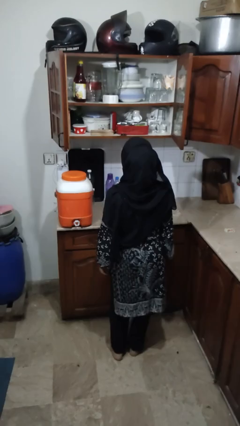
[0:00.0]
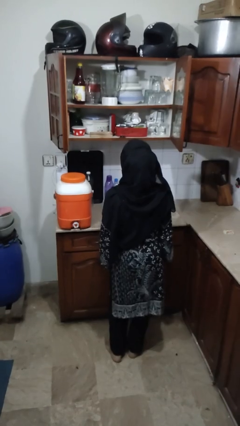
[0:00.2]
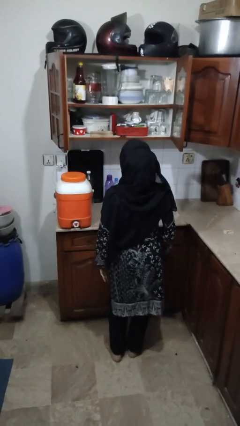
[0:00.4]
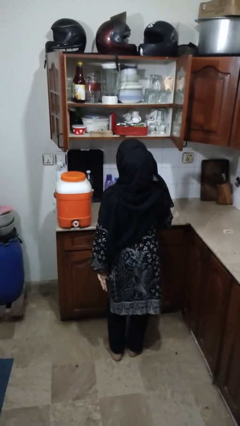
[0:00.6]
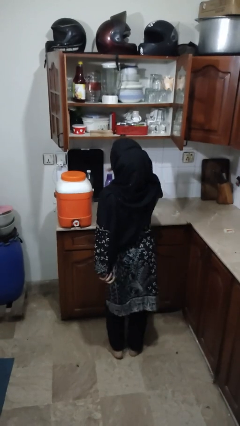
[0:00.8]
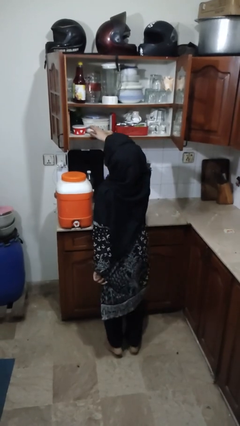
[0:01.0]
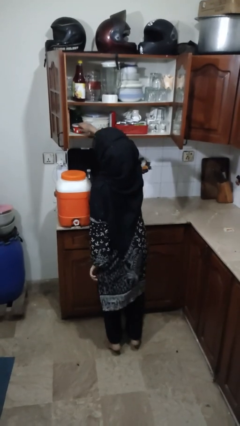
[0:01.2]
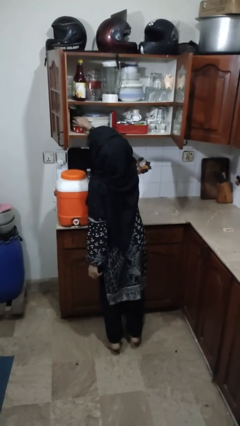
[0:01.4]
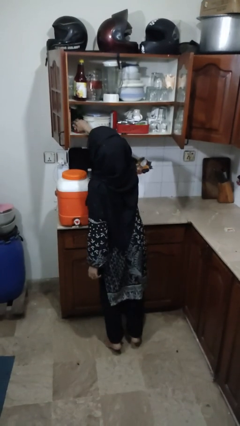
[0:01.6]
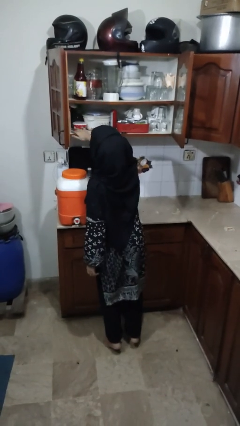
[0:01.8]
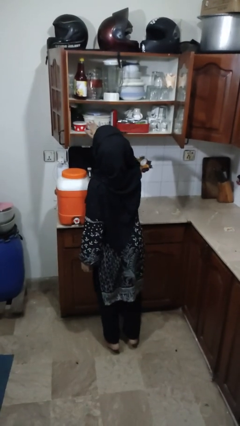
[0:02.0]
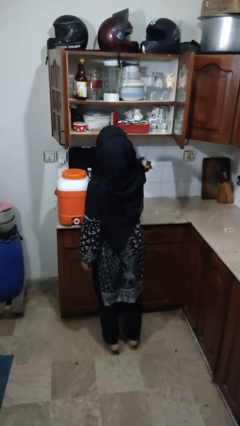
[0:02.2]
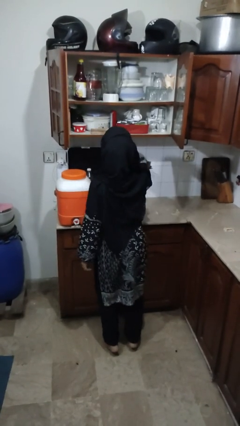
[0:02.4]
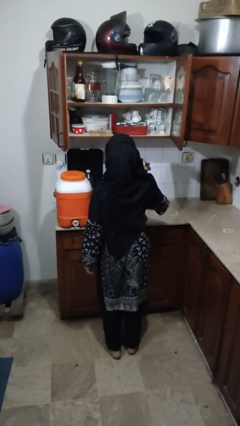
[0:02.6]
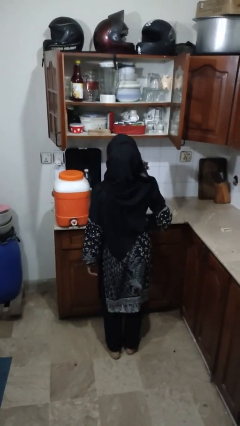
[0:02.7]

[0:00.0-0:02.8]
person searches in cabinet

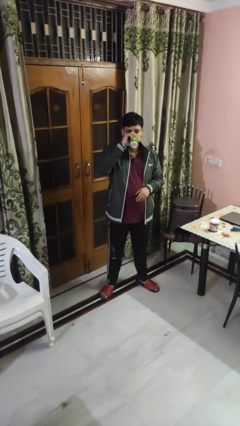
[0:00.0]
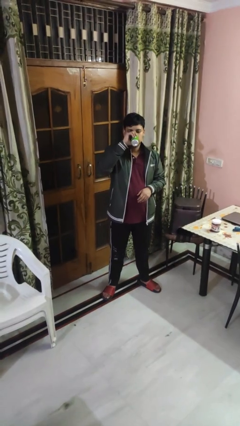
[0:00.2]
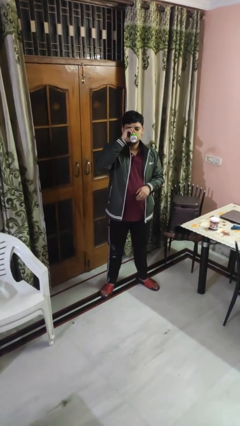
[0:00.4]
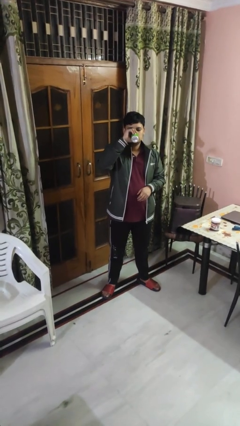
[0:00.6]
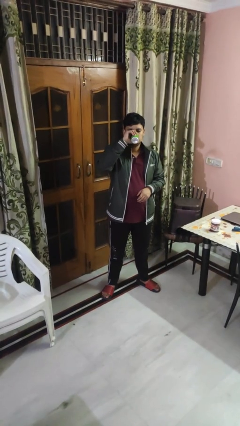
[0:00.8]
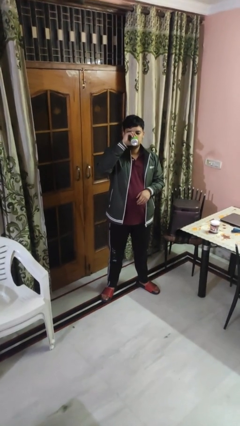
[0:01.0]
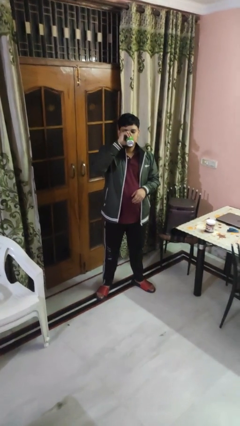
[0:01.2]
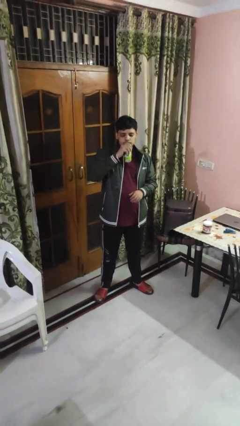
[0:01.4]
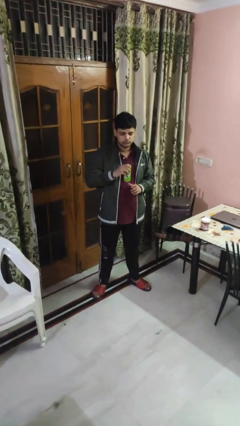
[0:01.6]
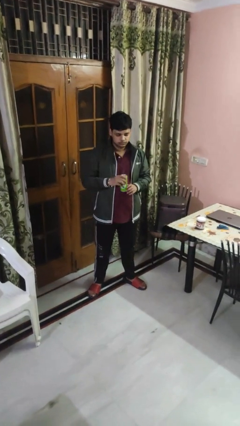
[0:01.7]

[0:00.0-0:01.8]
person drinks from beverage can

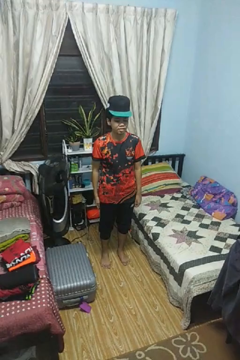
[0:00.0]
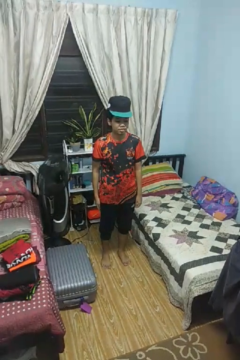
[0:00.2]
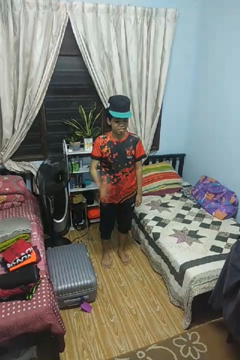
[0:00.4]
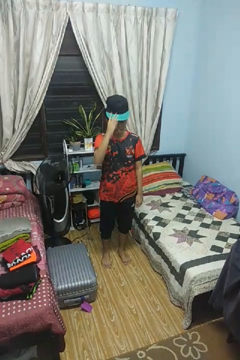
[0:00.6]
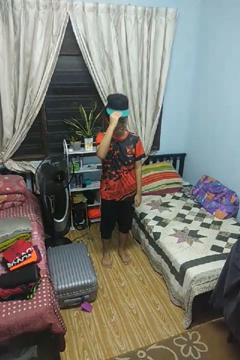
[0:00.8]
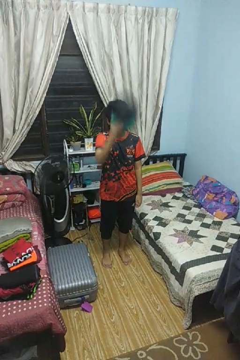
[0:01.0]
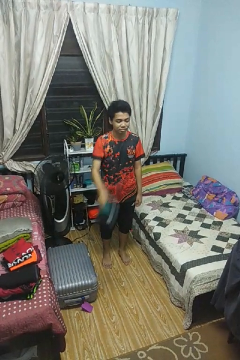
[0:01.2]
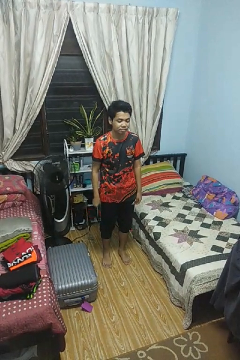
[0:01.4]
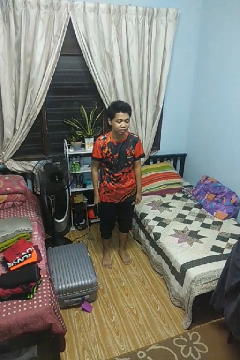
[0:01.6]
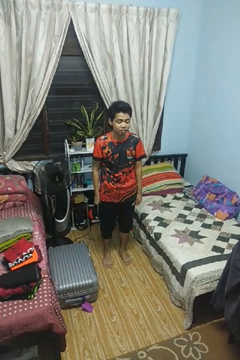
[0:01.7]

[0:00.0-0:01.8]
person takes off hat

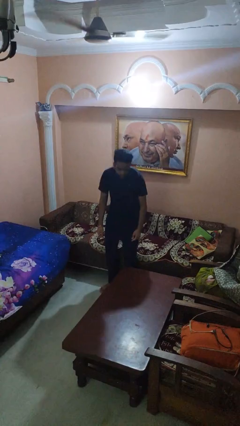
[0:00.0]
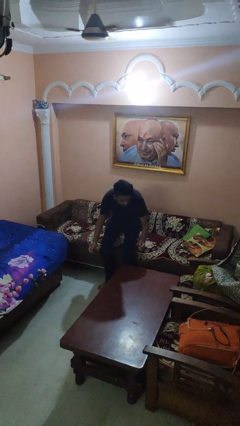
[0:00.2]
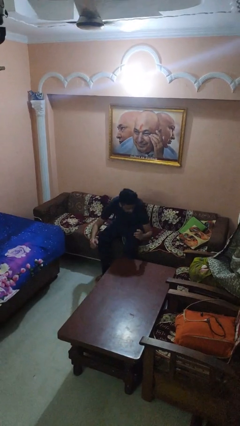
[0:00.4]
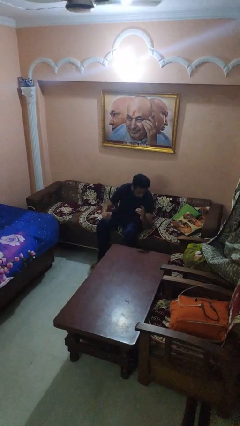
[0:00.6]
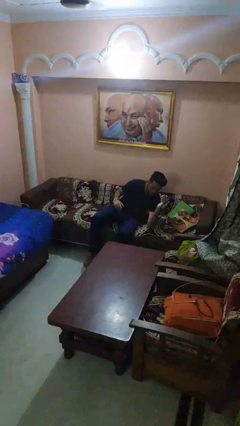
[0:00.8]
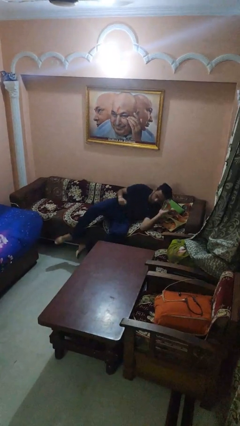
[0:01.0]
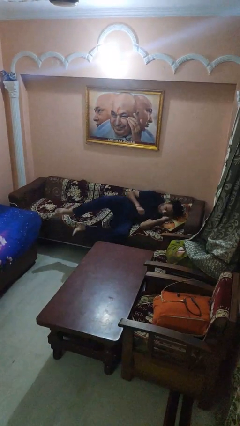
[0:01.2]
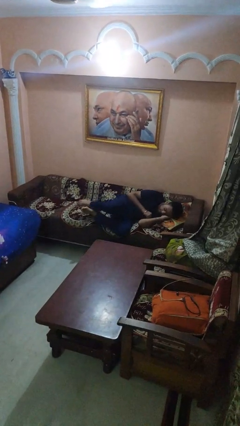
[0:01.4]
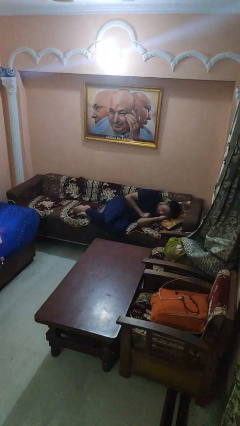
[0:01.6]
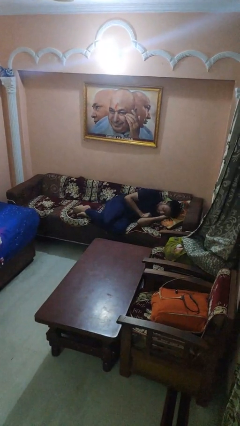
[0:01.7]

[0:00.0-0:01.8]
person lies down on couch

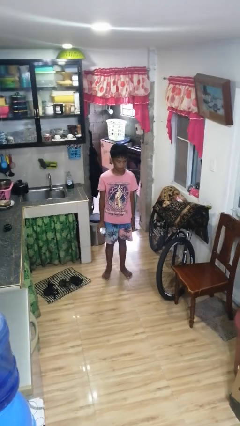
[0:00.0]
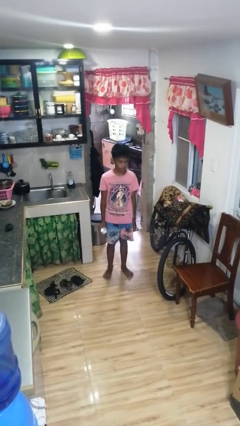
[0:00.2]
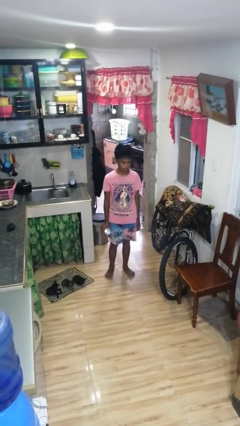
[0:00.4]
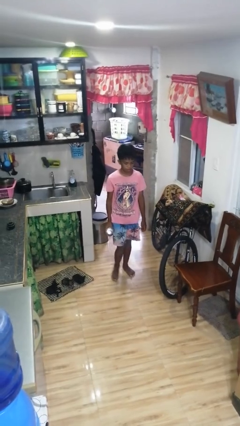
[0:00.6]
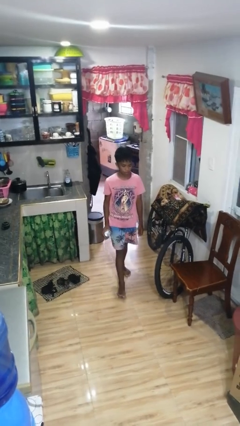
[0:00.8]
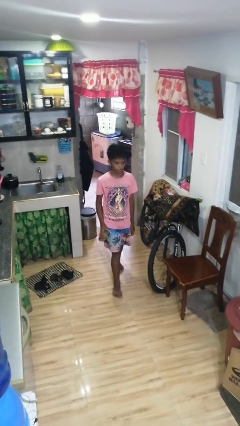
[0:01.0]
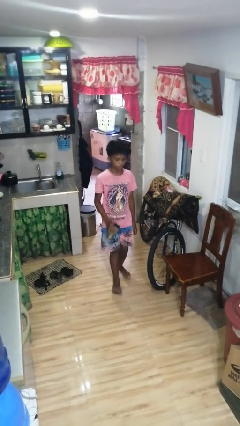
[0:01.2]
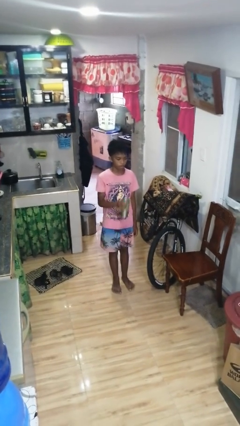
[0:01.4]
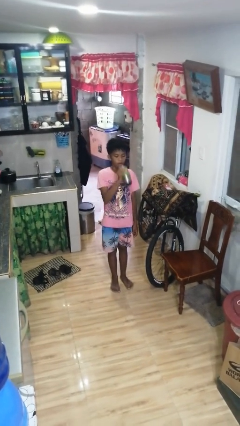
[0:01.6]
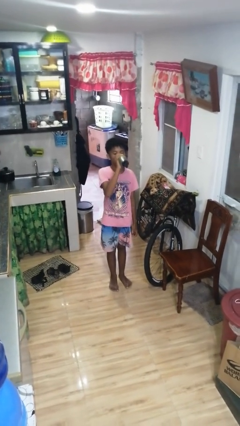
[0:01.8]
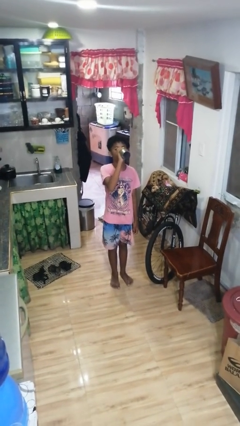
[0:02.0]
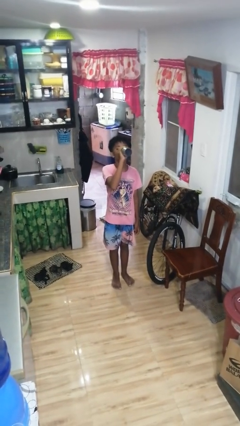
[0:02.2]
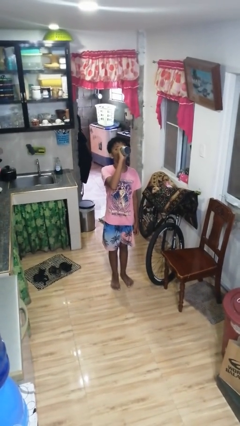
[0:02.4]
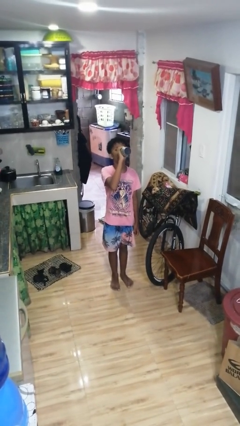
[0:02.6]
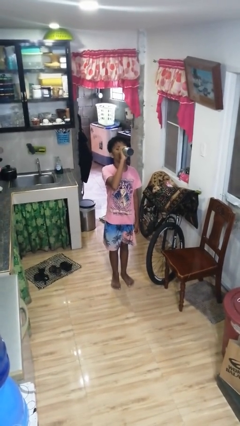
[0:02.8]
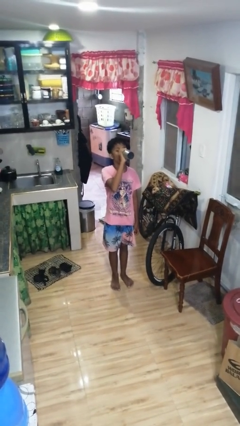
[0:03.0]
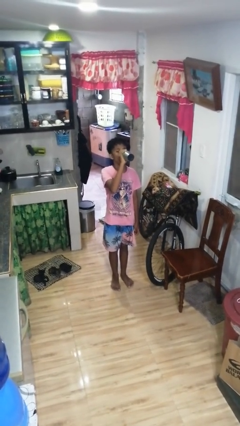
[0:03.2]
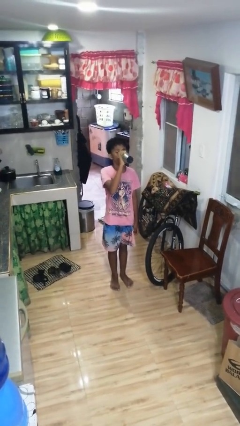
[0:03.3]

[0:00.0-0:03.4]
person drinks from bottle

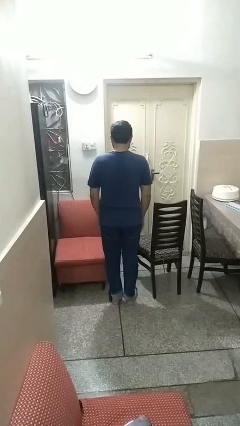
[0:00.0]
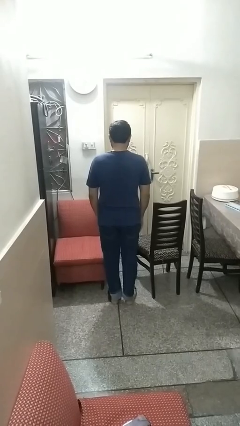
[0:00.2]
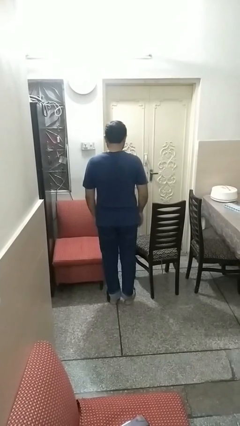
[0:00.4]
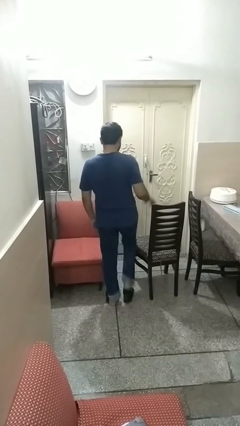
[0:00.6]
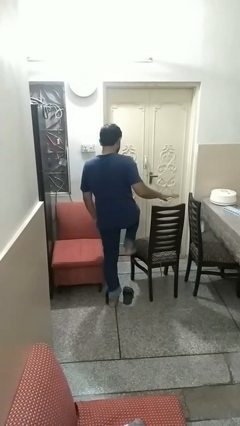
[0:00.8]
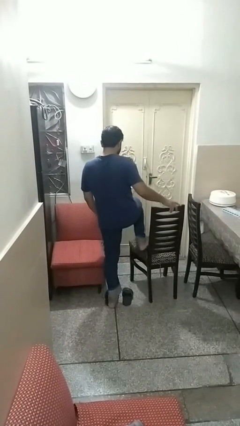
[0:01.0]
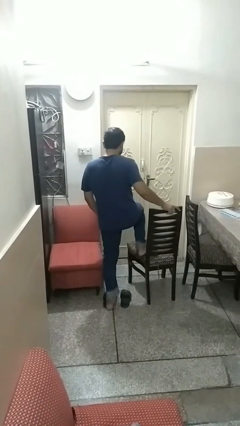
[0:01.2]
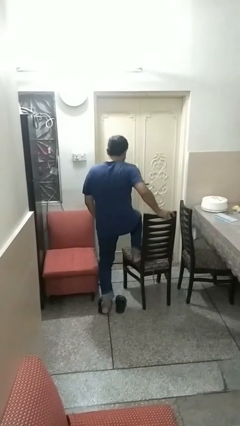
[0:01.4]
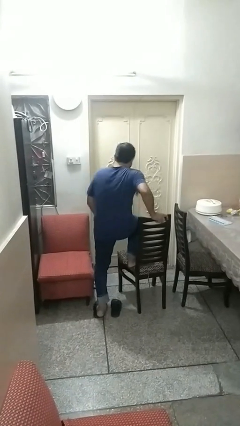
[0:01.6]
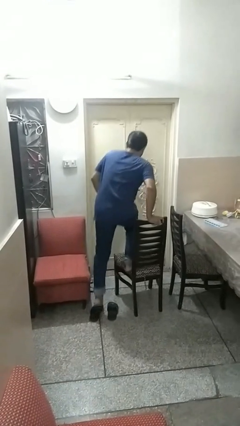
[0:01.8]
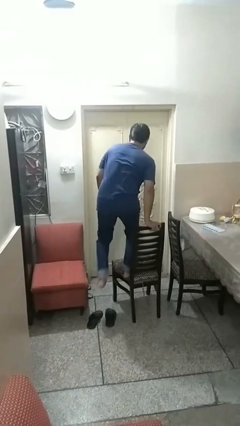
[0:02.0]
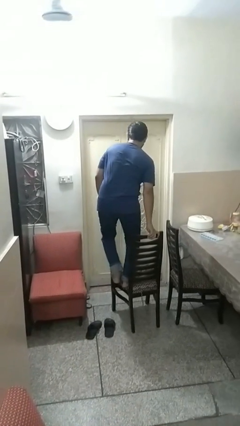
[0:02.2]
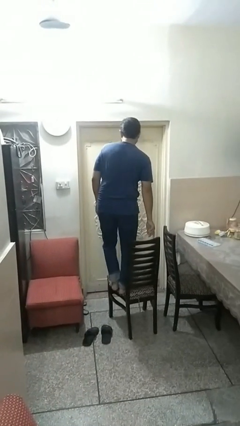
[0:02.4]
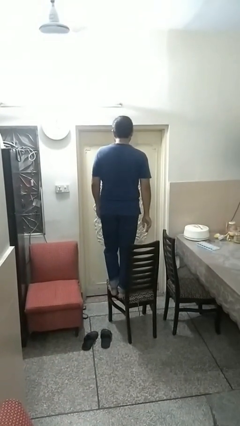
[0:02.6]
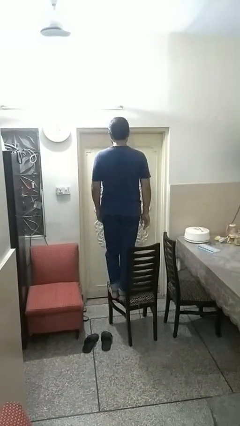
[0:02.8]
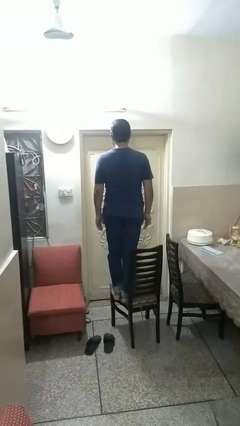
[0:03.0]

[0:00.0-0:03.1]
person climbs on chair

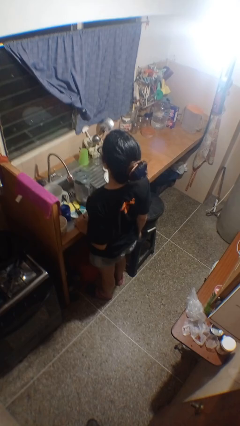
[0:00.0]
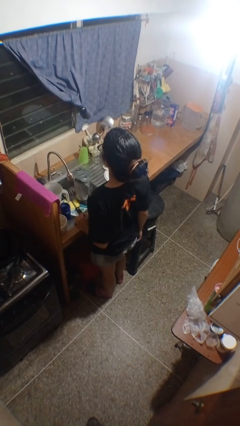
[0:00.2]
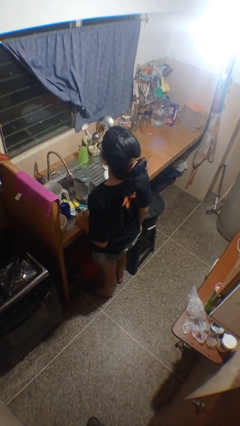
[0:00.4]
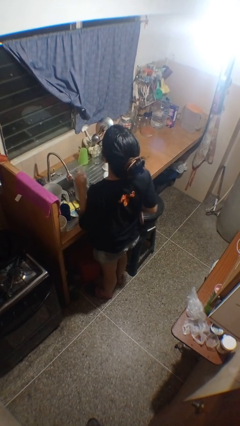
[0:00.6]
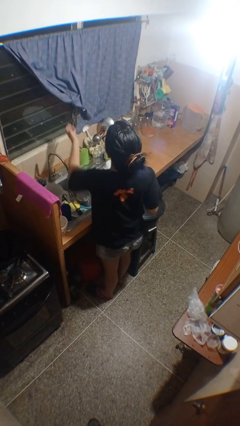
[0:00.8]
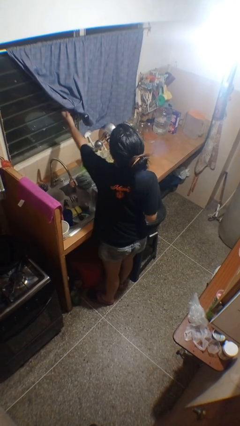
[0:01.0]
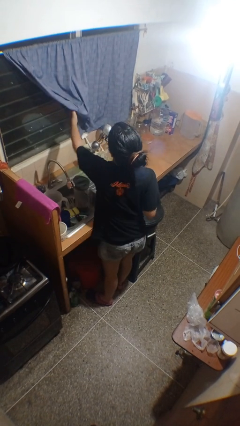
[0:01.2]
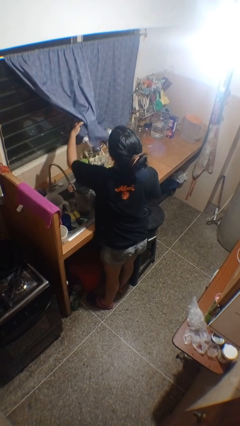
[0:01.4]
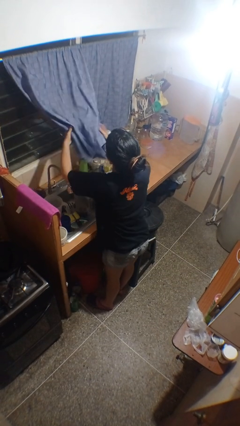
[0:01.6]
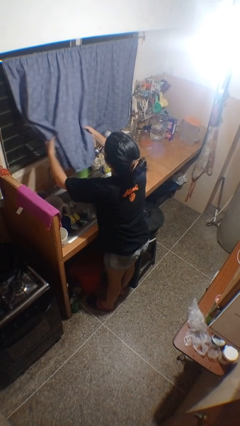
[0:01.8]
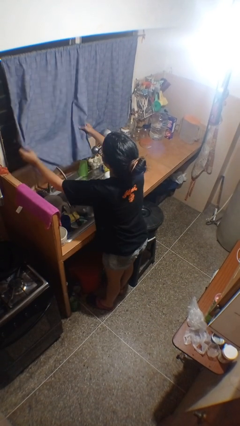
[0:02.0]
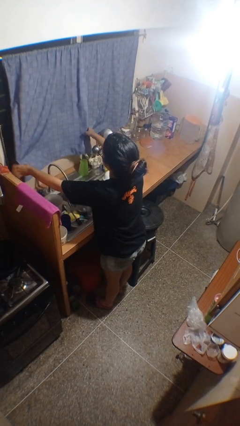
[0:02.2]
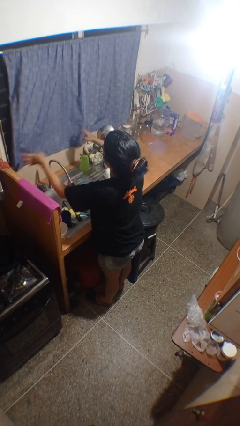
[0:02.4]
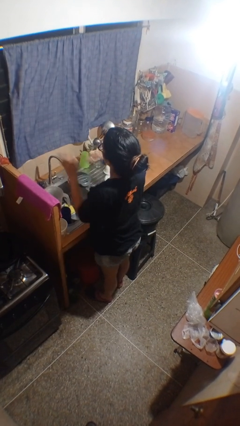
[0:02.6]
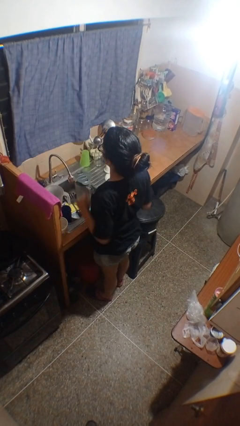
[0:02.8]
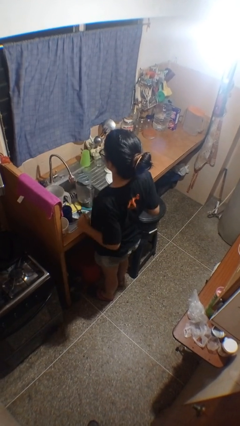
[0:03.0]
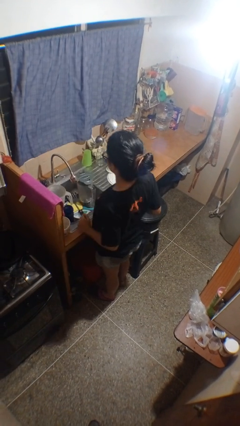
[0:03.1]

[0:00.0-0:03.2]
person closes curtains
